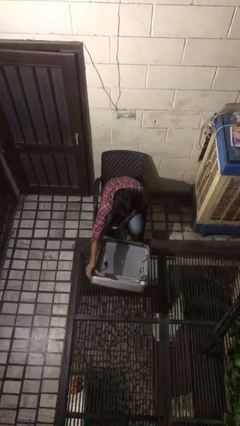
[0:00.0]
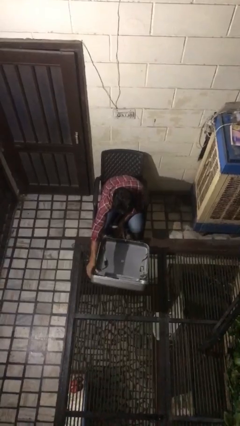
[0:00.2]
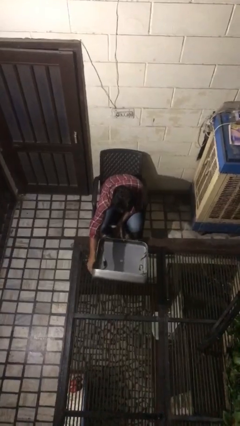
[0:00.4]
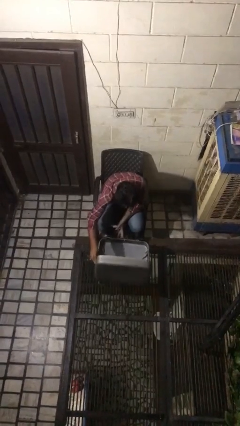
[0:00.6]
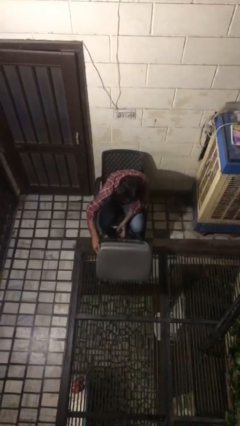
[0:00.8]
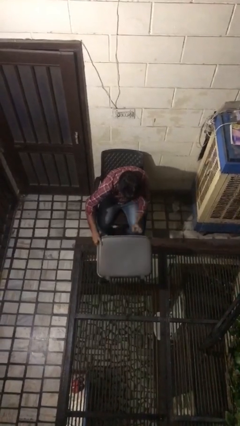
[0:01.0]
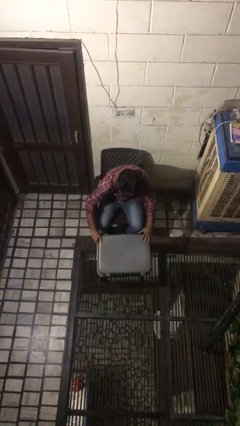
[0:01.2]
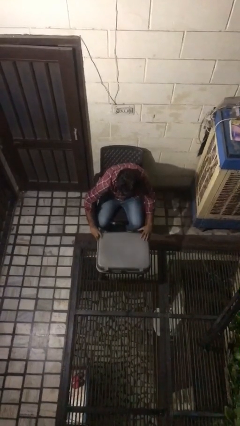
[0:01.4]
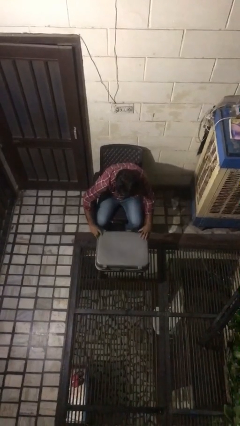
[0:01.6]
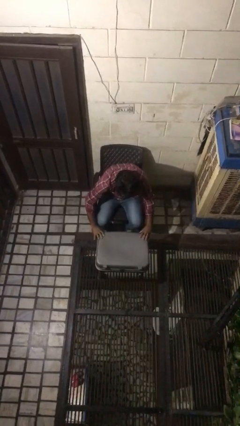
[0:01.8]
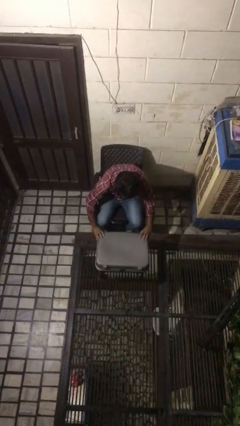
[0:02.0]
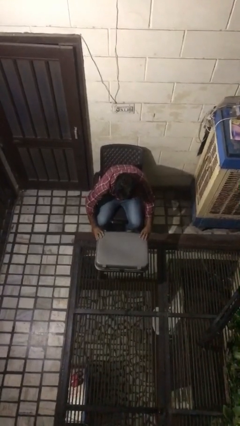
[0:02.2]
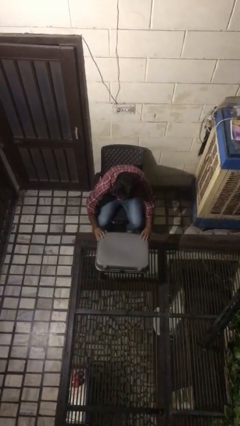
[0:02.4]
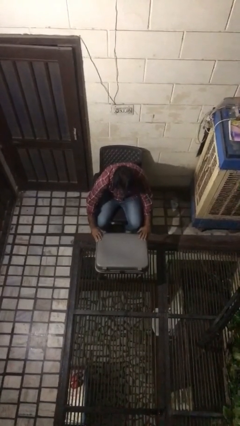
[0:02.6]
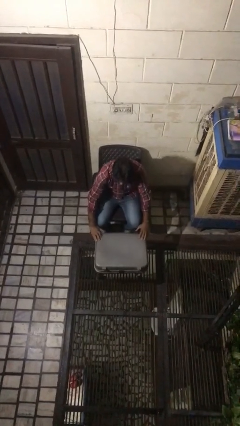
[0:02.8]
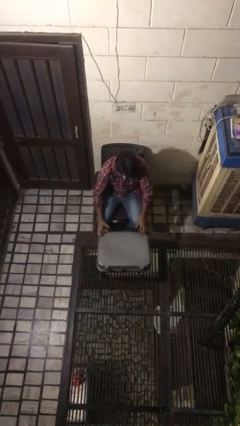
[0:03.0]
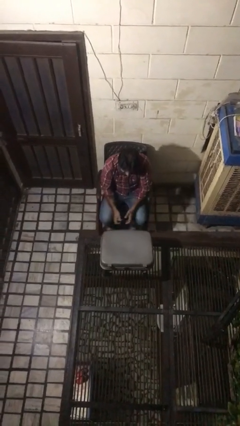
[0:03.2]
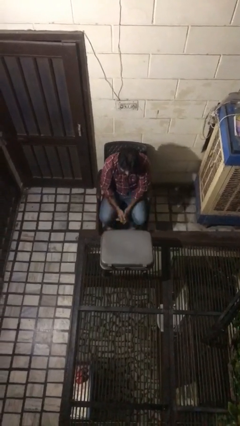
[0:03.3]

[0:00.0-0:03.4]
person closes suitcase

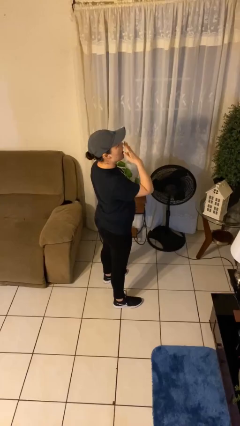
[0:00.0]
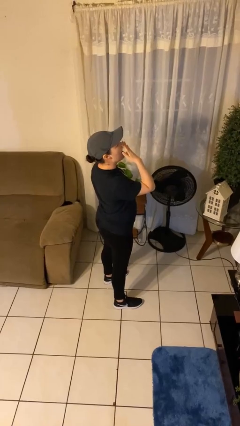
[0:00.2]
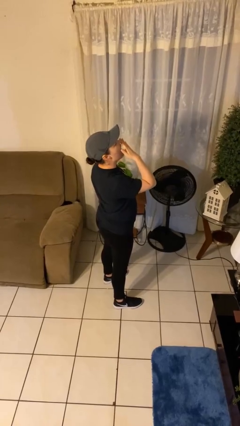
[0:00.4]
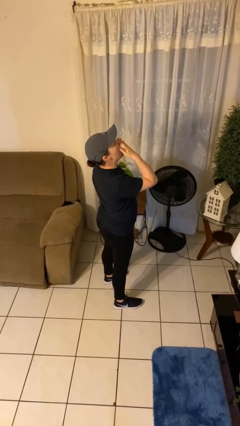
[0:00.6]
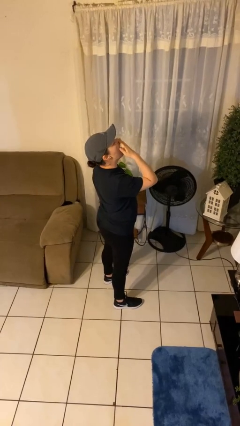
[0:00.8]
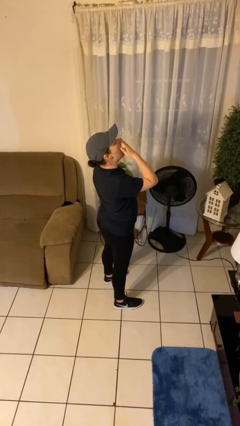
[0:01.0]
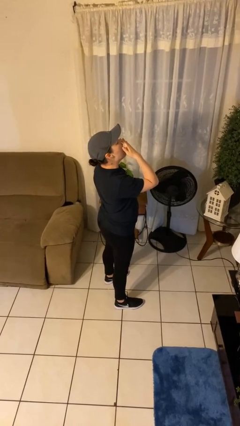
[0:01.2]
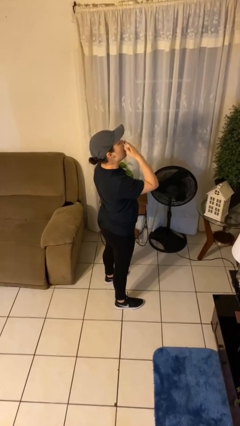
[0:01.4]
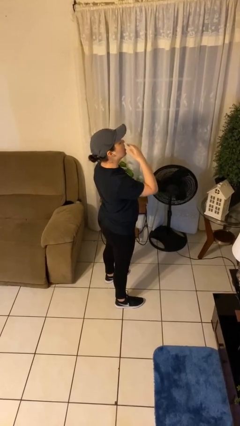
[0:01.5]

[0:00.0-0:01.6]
person yawns

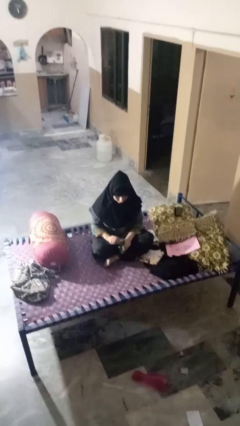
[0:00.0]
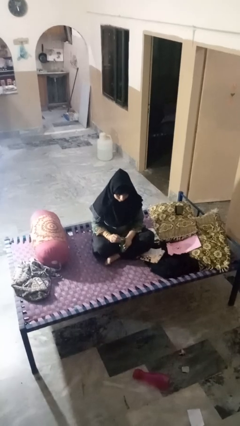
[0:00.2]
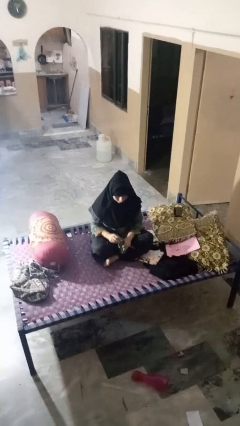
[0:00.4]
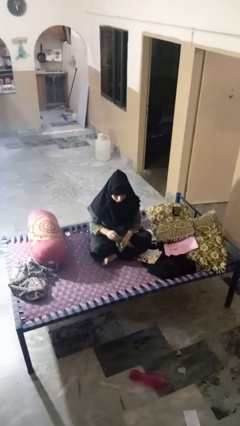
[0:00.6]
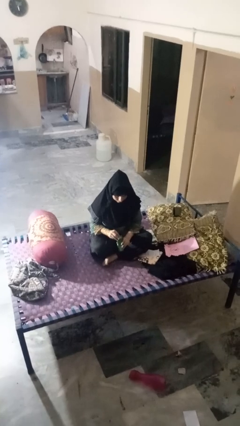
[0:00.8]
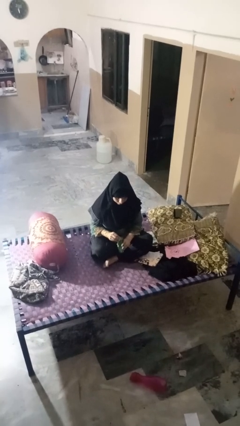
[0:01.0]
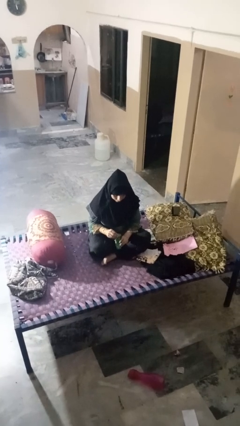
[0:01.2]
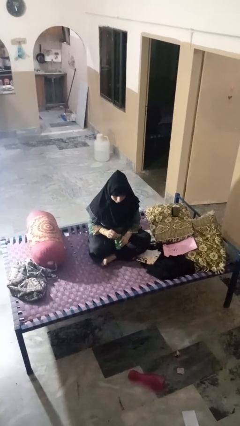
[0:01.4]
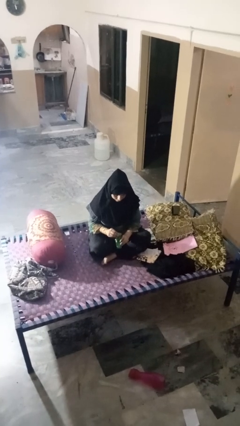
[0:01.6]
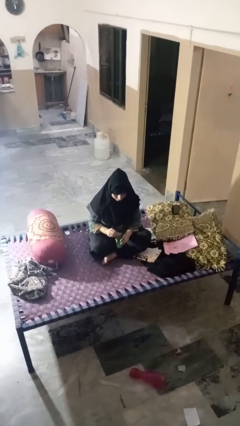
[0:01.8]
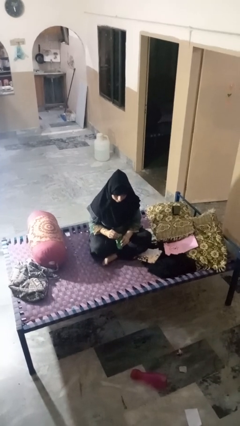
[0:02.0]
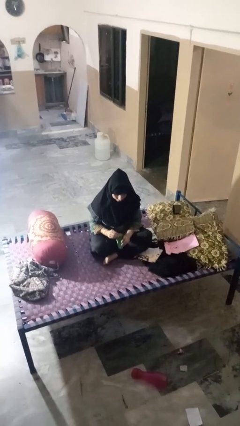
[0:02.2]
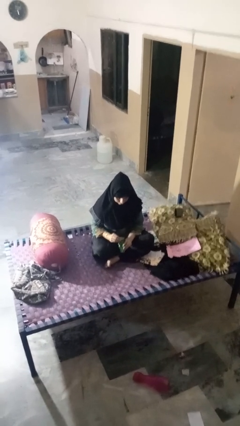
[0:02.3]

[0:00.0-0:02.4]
person opens can with can opener

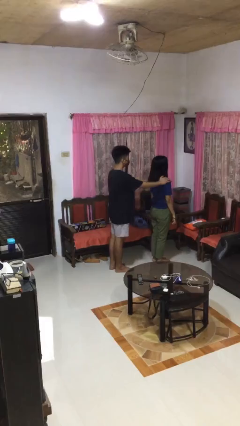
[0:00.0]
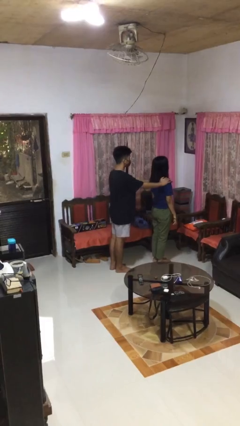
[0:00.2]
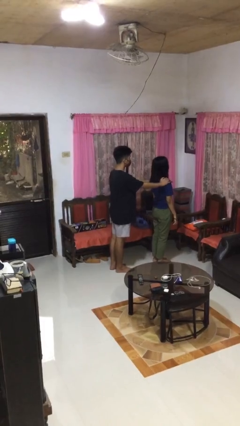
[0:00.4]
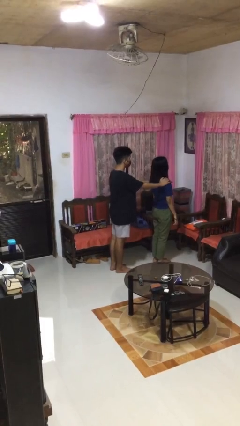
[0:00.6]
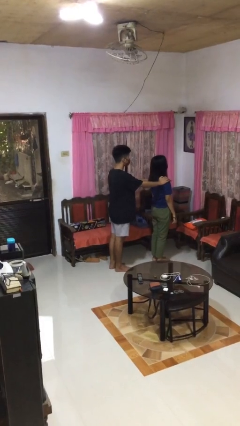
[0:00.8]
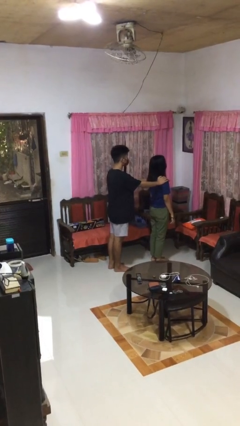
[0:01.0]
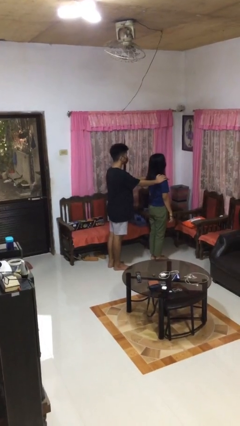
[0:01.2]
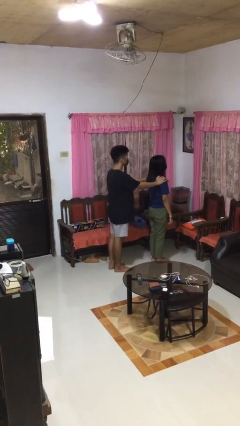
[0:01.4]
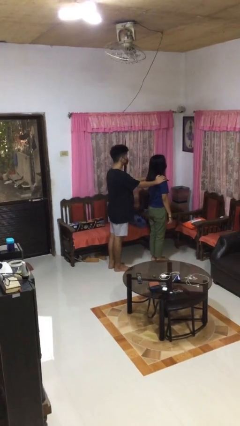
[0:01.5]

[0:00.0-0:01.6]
person grabs person by shoulder

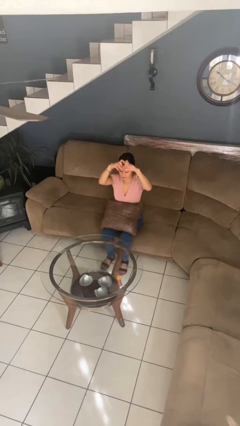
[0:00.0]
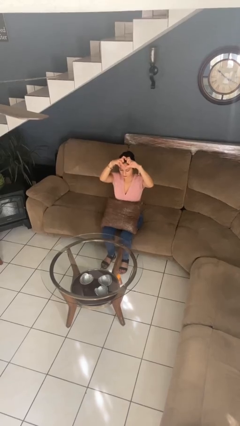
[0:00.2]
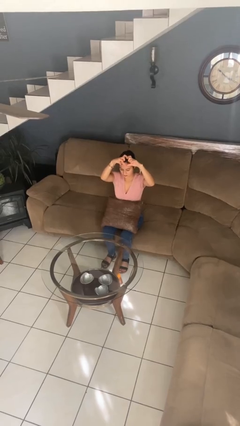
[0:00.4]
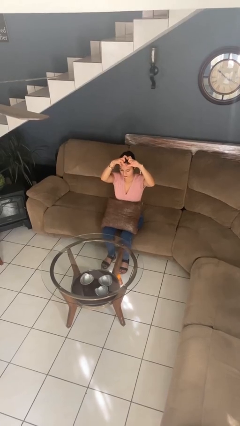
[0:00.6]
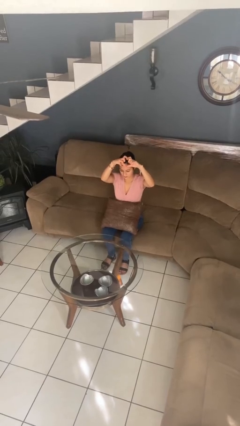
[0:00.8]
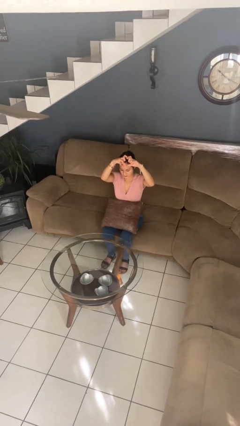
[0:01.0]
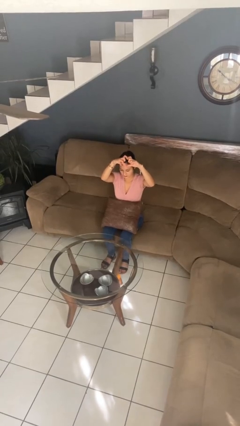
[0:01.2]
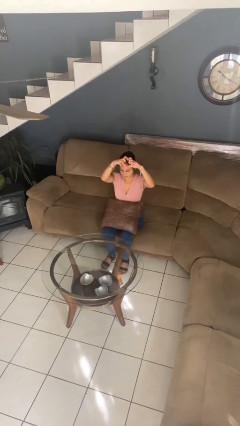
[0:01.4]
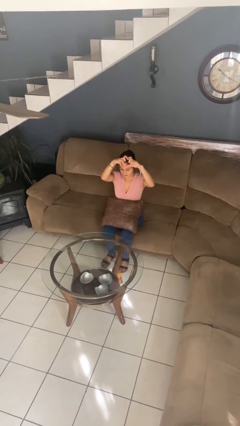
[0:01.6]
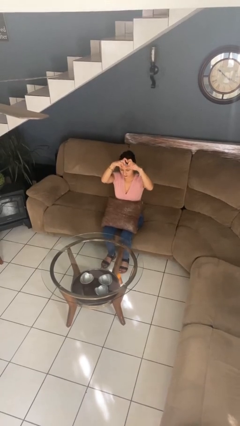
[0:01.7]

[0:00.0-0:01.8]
person gestures heart

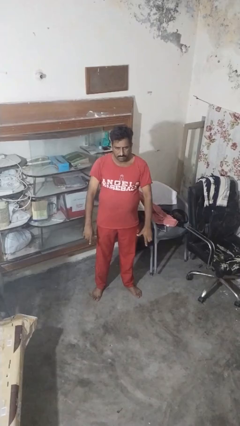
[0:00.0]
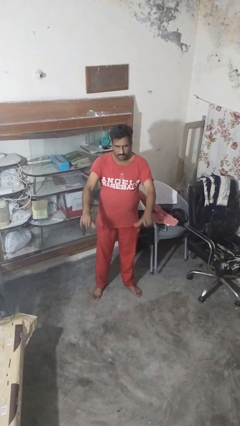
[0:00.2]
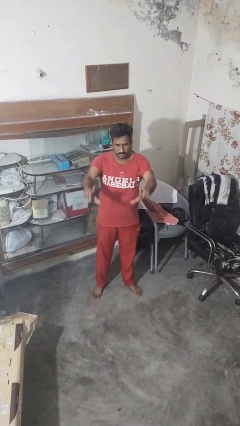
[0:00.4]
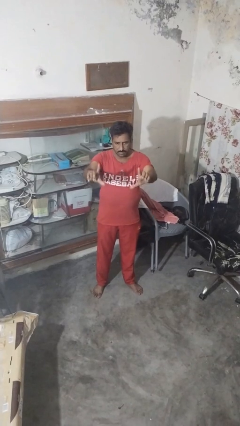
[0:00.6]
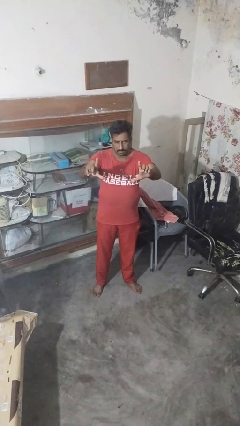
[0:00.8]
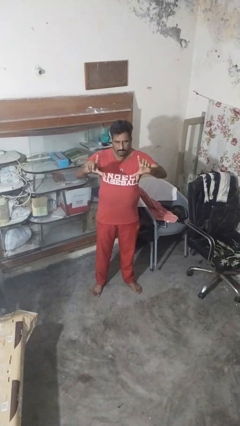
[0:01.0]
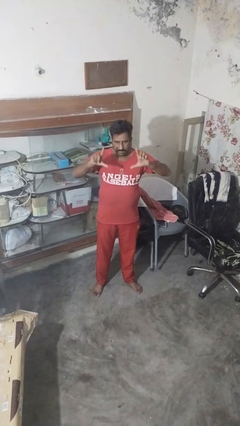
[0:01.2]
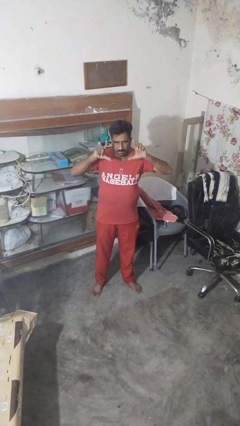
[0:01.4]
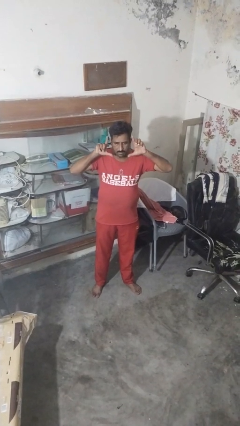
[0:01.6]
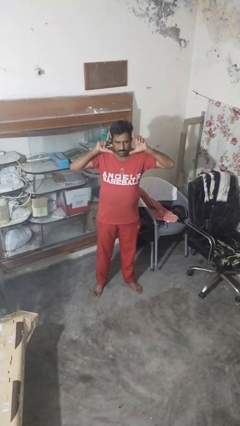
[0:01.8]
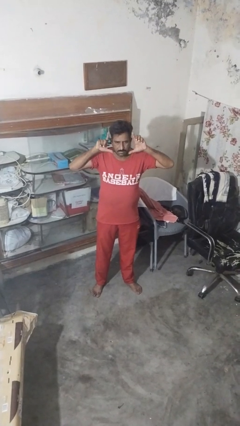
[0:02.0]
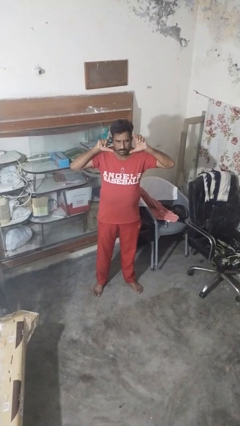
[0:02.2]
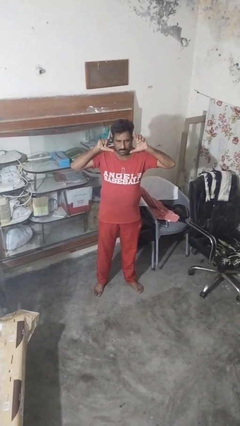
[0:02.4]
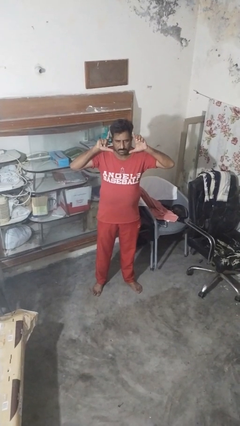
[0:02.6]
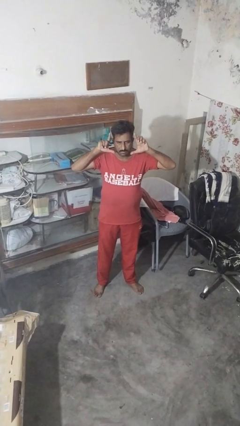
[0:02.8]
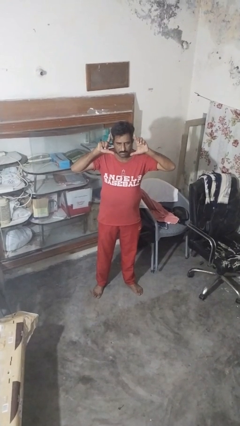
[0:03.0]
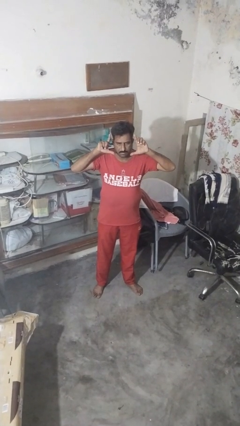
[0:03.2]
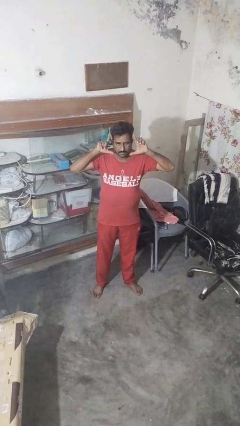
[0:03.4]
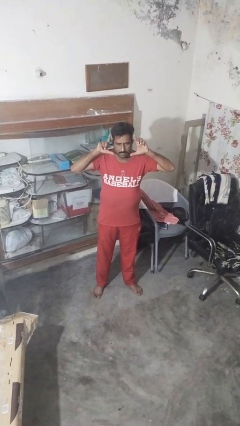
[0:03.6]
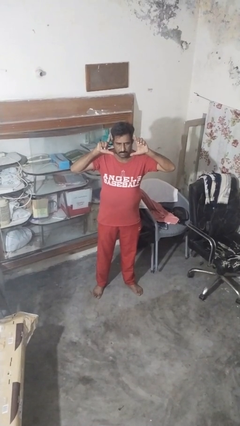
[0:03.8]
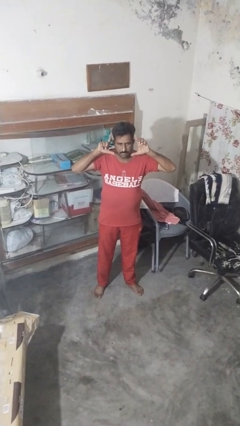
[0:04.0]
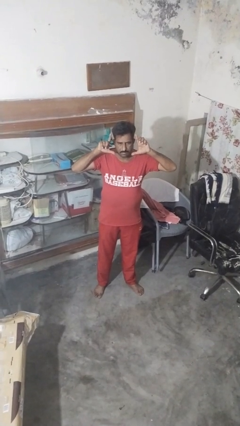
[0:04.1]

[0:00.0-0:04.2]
person gestures zoom in

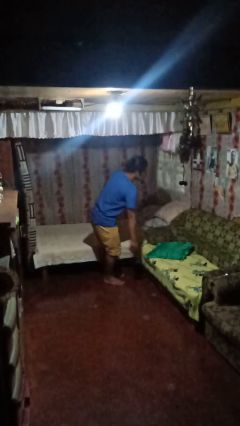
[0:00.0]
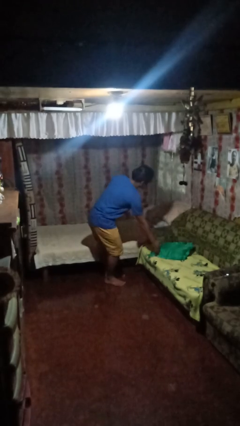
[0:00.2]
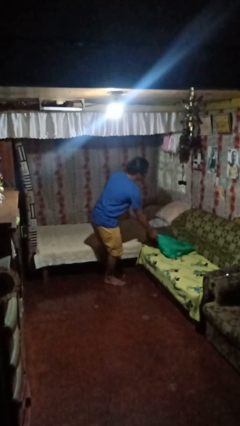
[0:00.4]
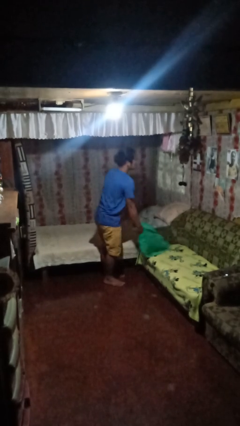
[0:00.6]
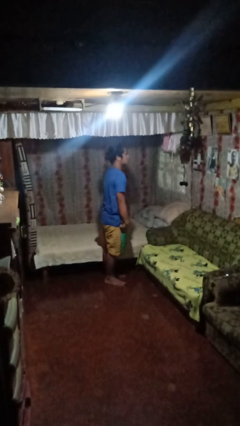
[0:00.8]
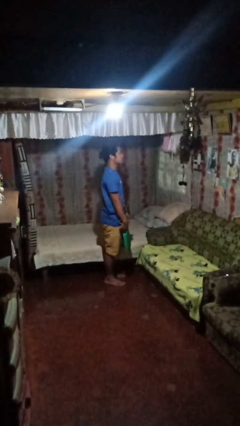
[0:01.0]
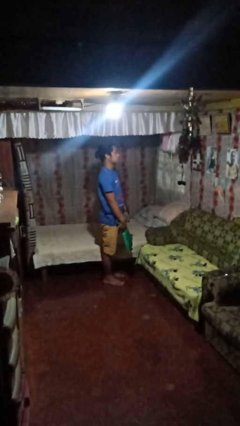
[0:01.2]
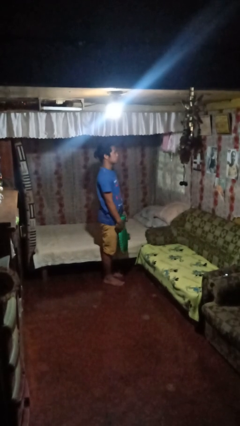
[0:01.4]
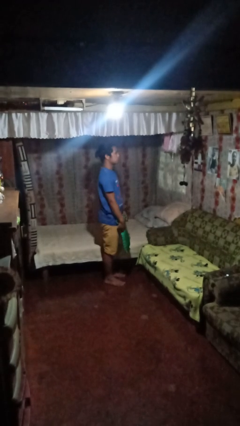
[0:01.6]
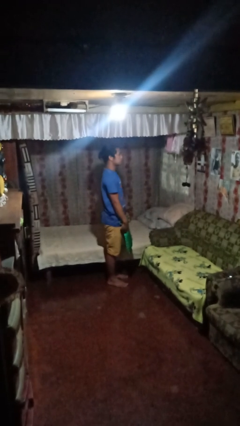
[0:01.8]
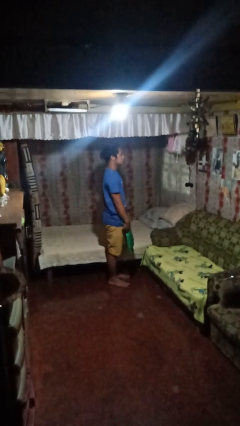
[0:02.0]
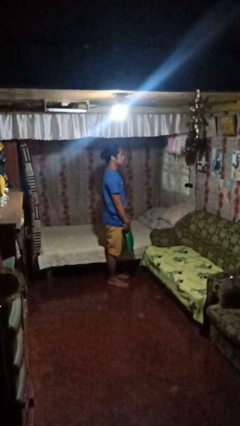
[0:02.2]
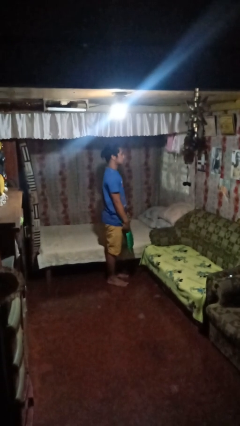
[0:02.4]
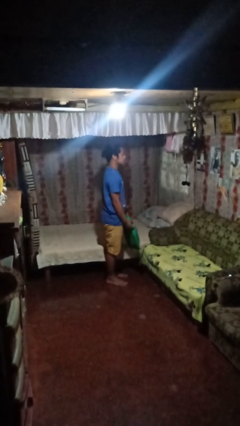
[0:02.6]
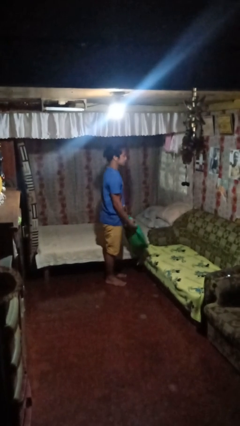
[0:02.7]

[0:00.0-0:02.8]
person picks up object from couch
